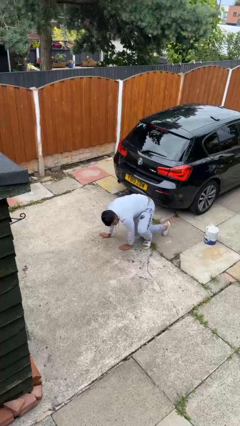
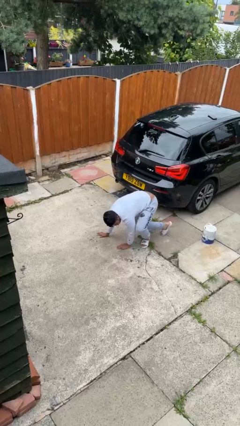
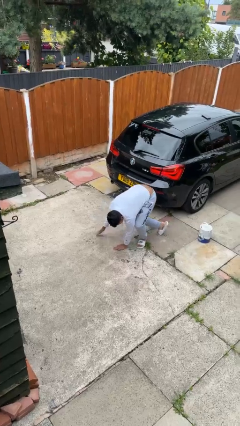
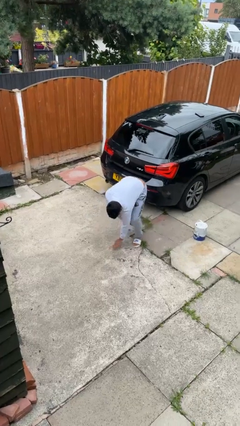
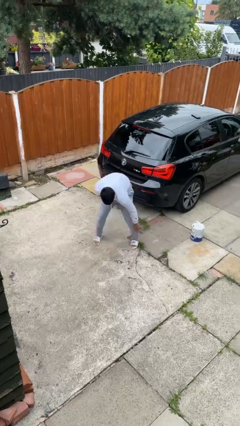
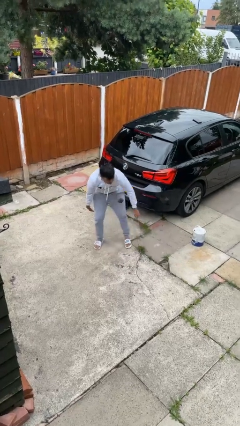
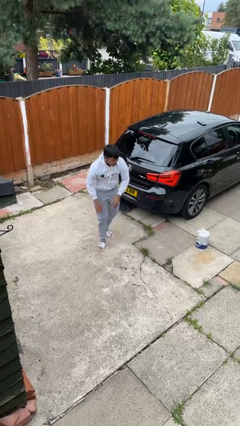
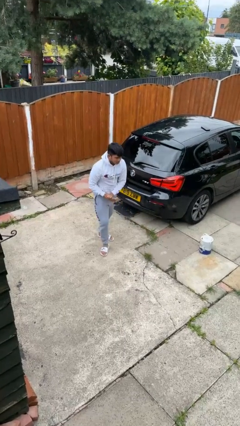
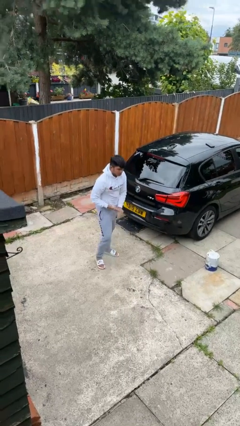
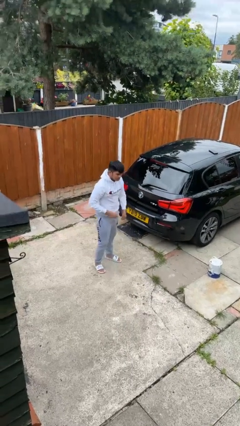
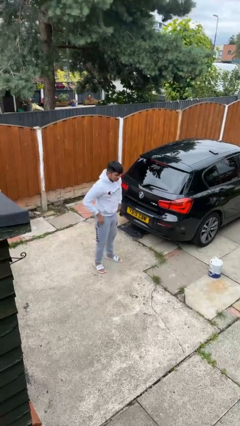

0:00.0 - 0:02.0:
person stands up from floor

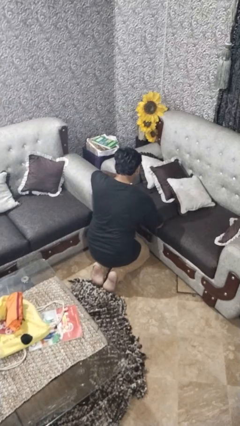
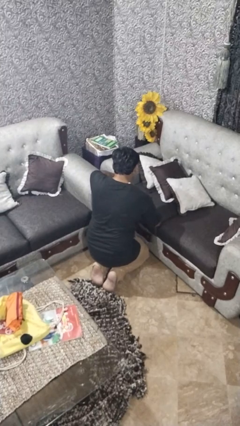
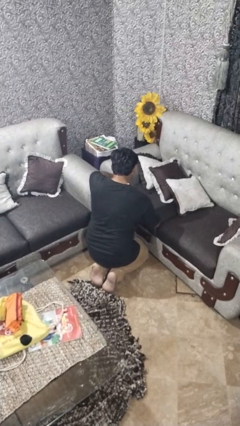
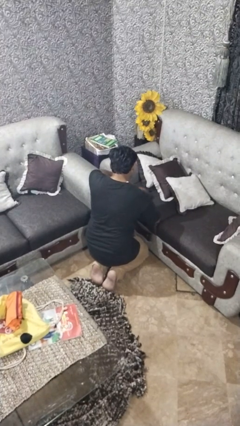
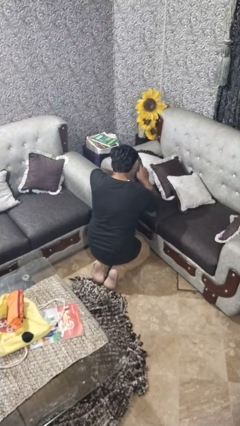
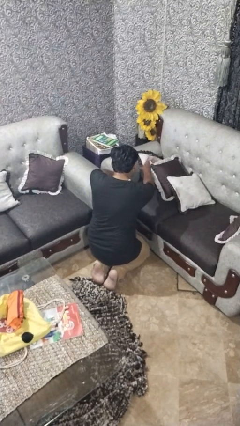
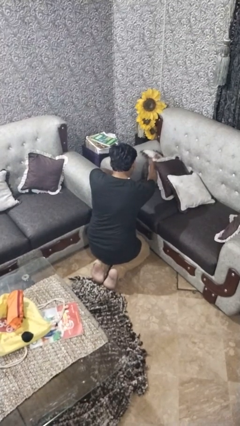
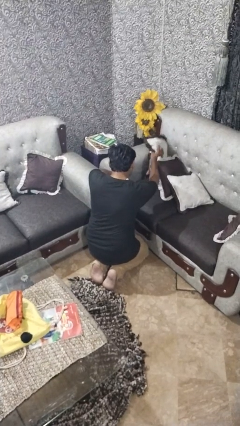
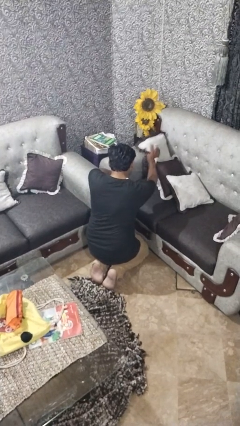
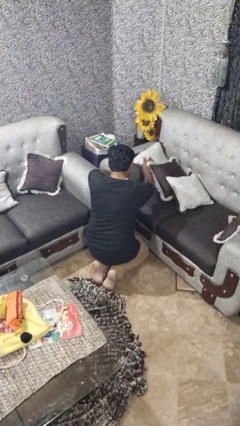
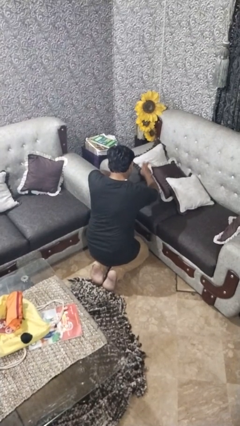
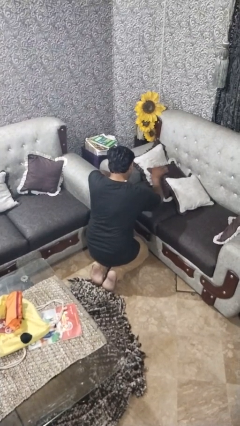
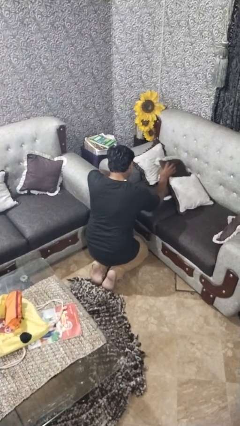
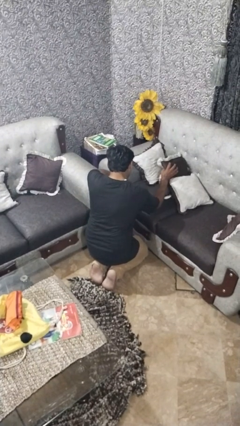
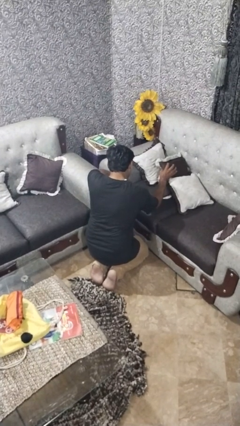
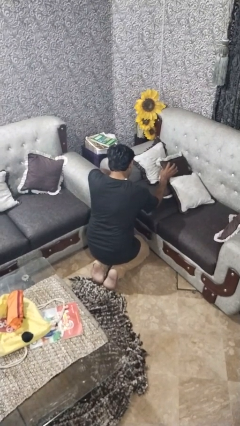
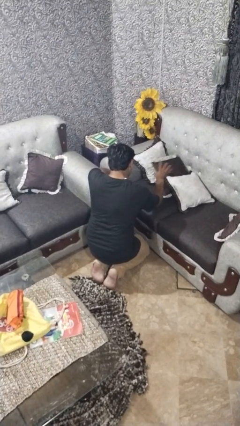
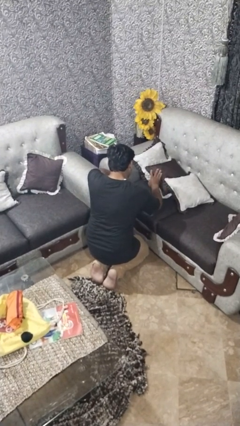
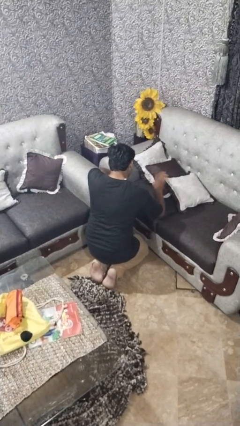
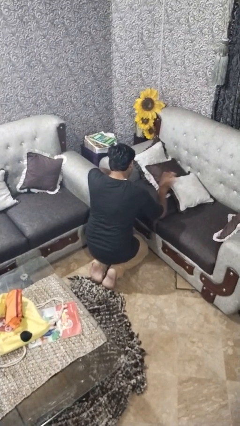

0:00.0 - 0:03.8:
person searches in couch

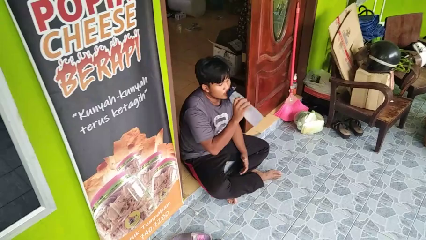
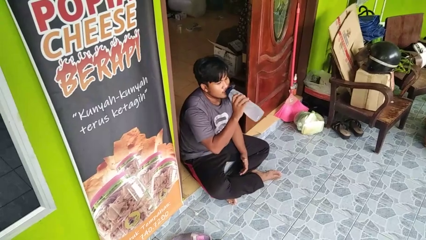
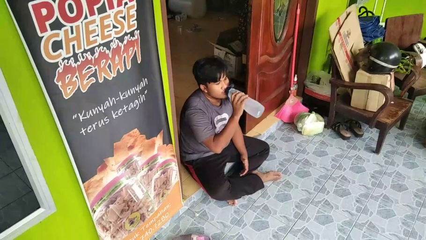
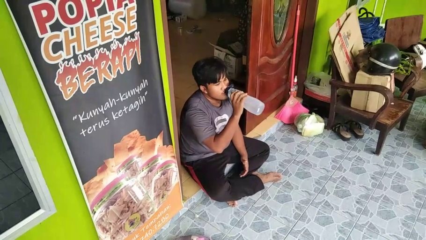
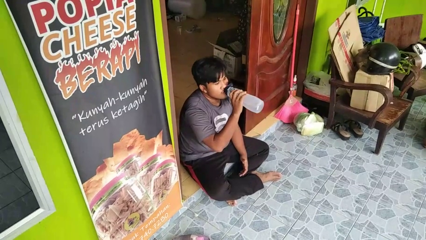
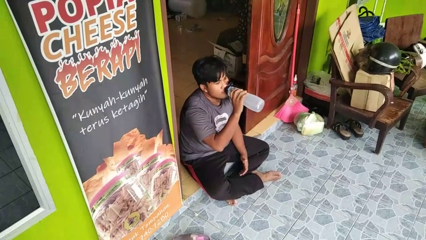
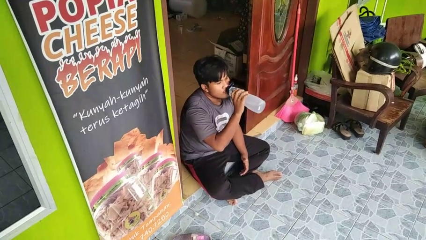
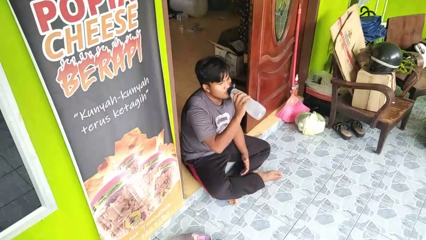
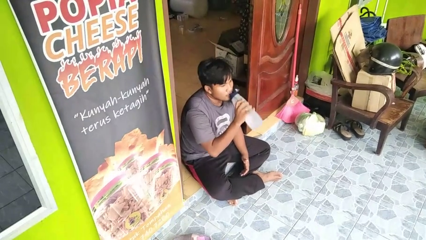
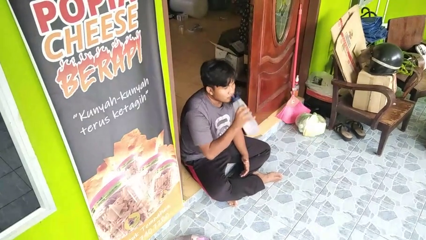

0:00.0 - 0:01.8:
person drinks from bottle

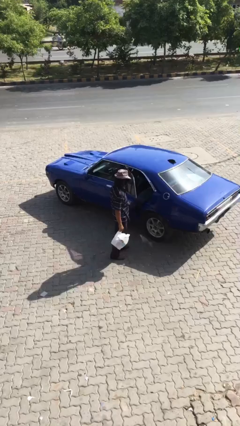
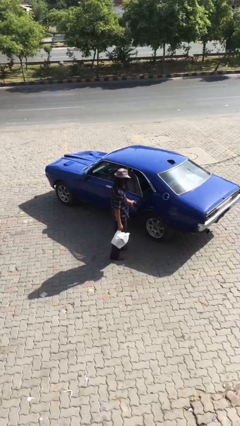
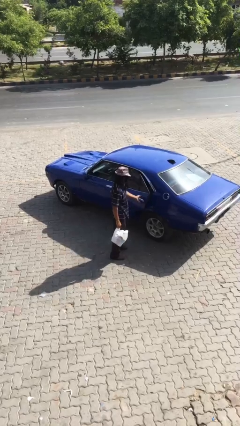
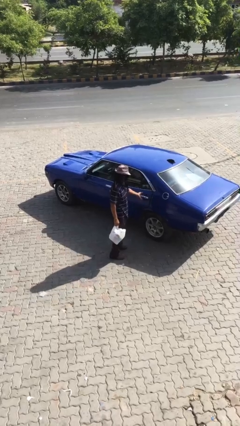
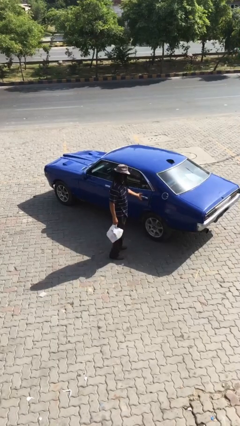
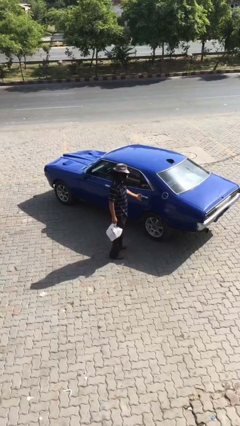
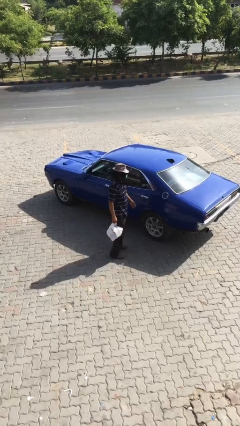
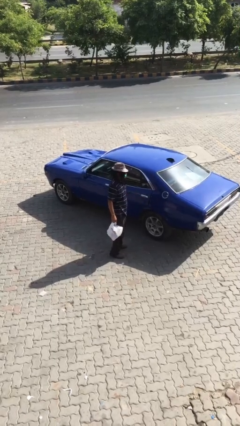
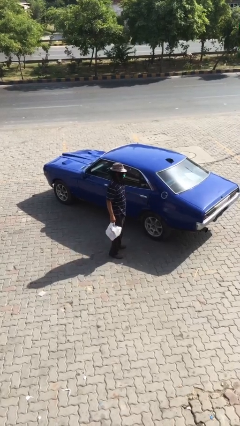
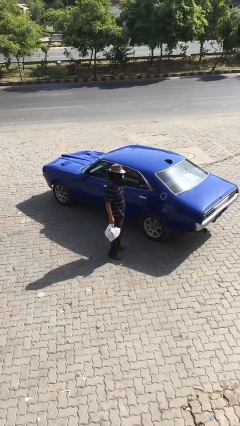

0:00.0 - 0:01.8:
person closes car door

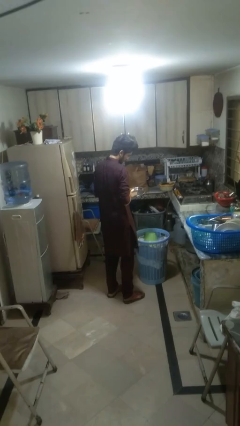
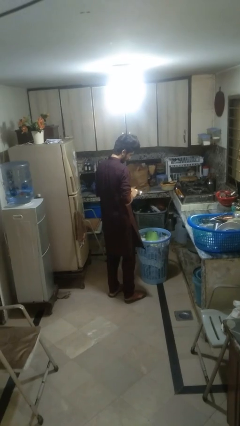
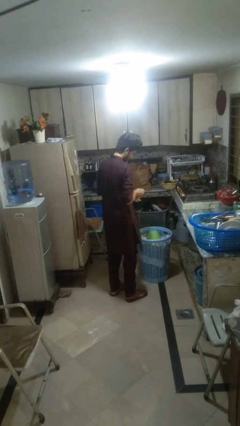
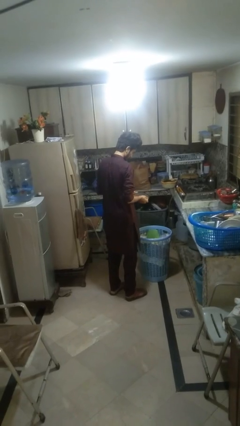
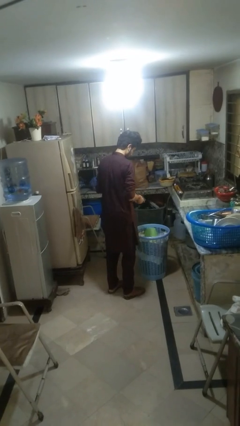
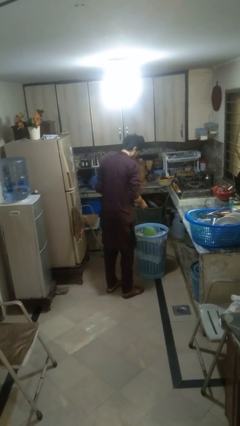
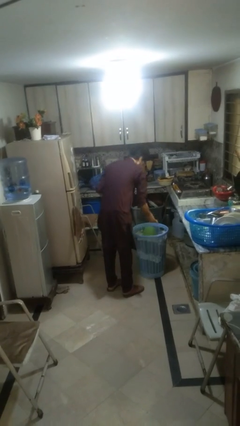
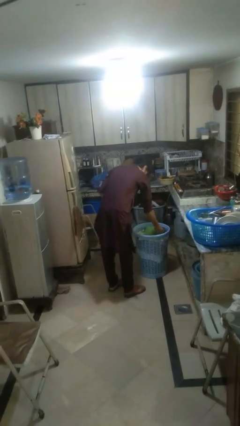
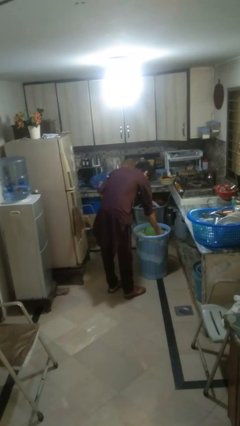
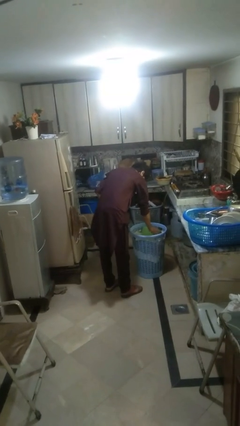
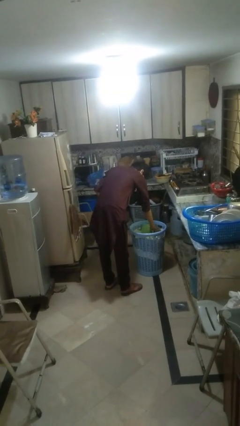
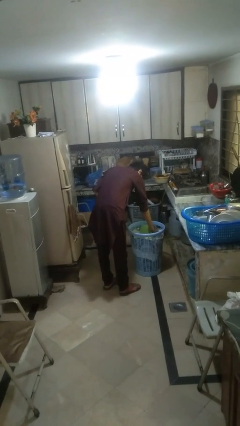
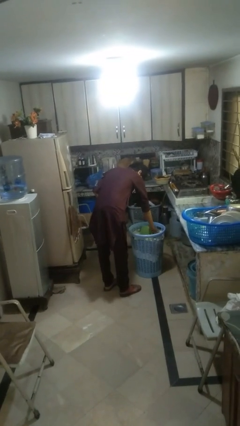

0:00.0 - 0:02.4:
person puts object into basket

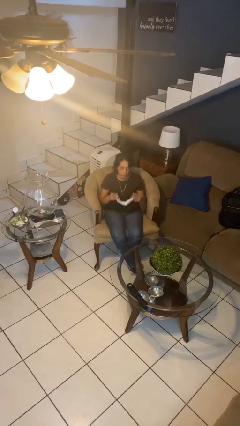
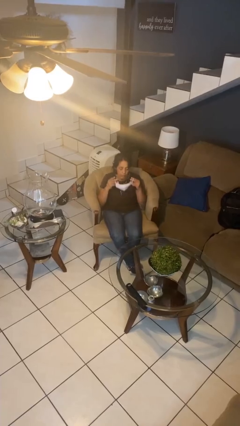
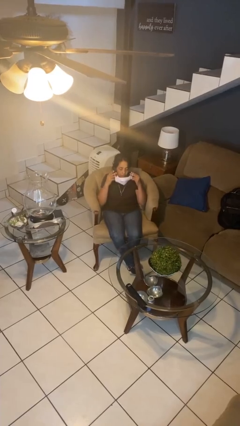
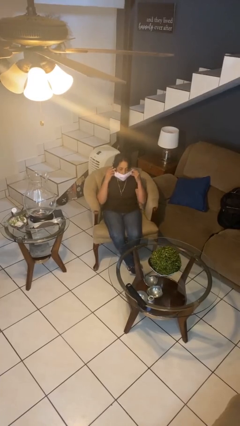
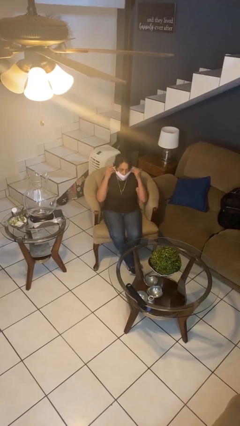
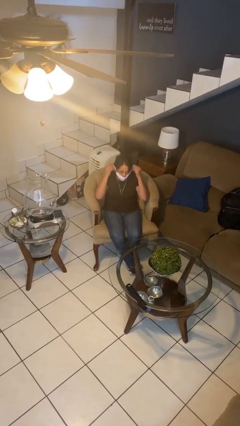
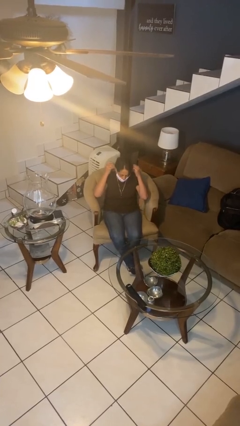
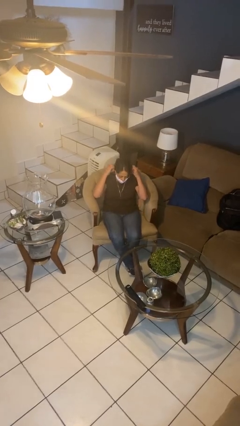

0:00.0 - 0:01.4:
person puts on facemask

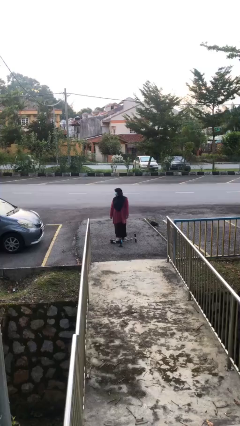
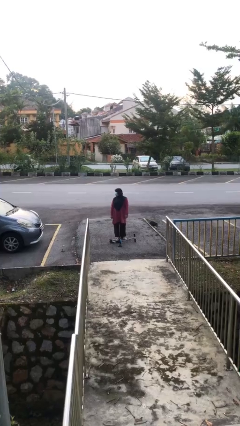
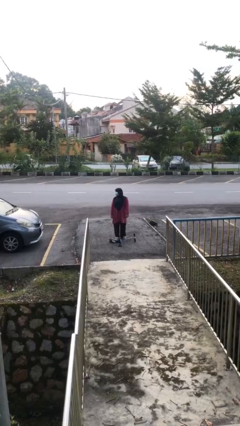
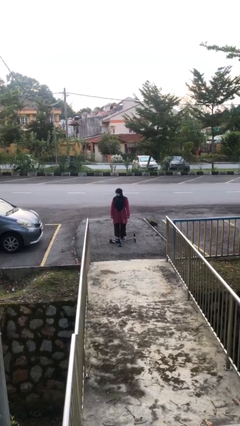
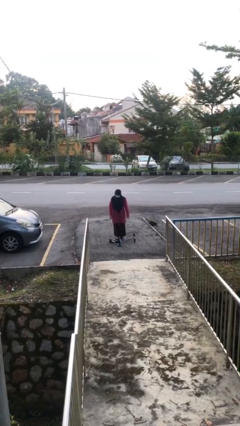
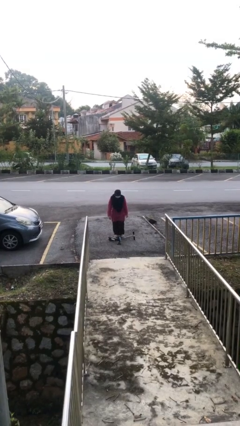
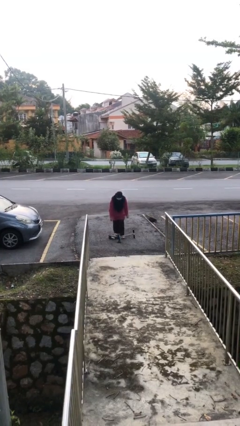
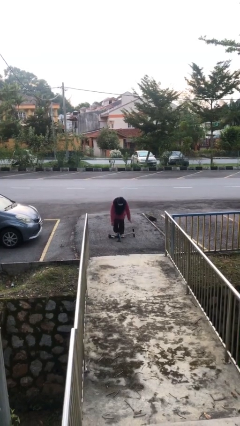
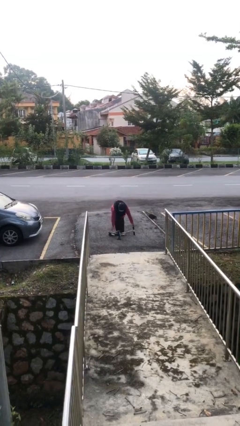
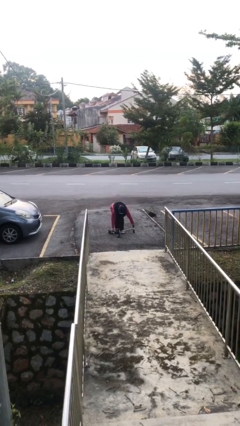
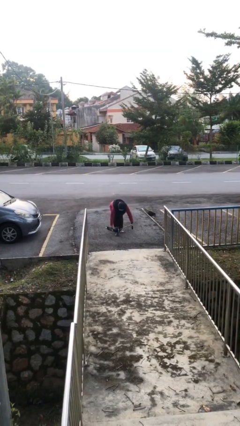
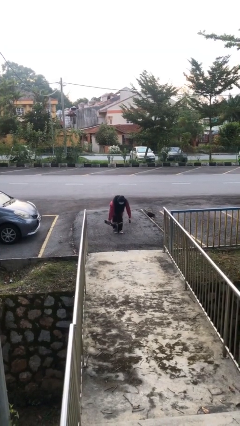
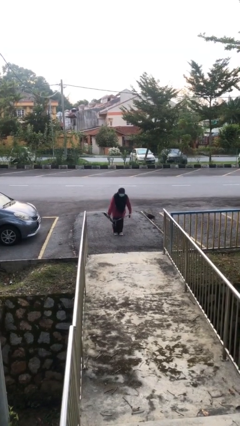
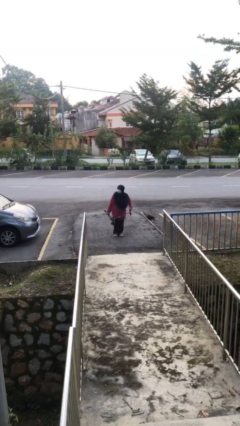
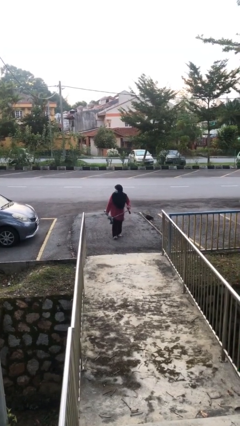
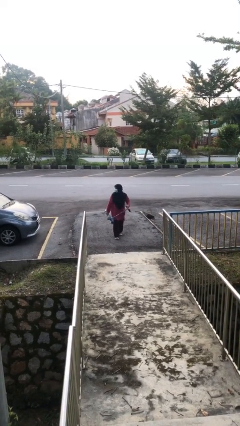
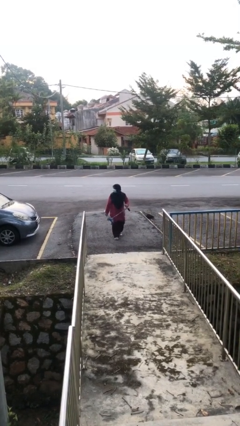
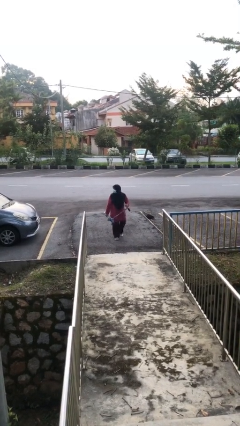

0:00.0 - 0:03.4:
person picks up object from floor
